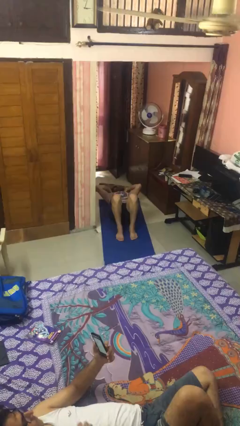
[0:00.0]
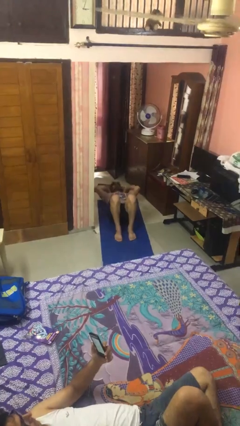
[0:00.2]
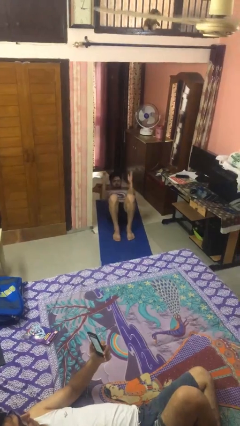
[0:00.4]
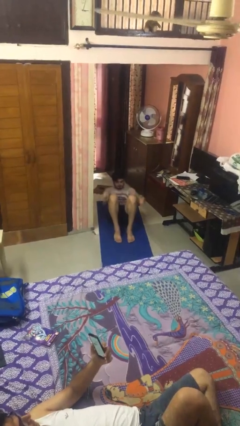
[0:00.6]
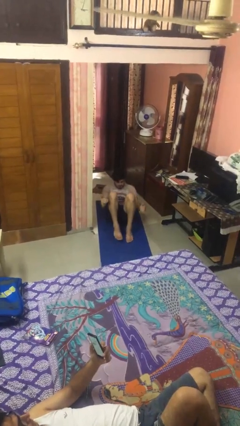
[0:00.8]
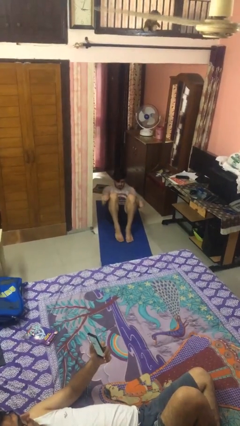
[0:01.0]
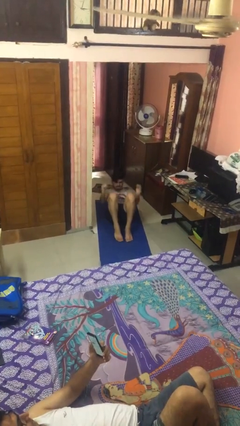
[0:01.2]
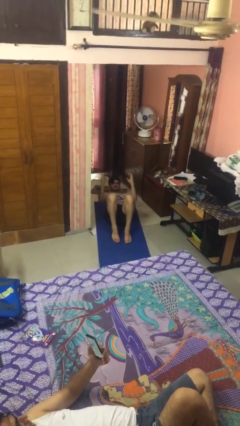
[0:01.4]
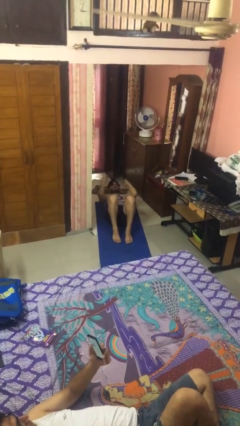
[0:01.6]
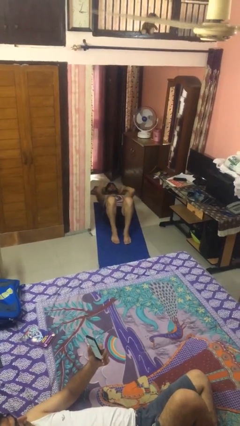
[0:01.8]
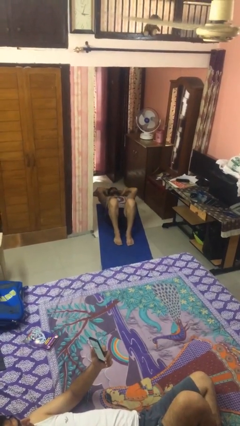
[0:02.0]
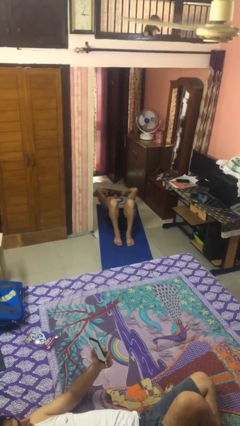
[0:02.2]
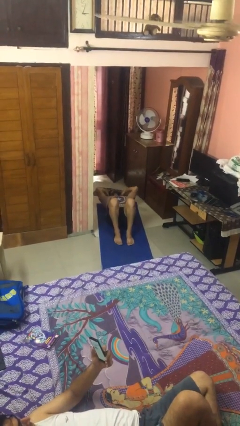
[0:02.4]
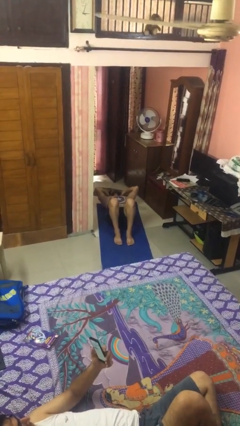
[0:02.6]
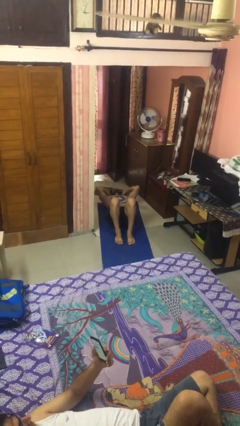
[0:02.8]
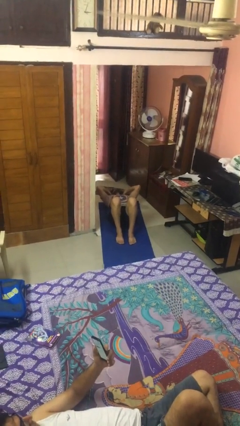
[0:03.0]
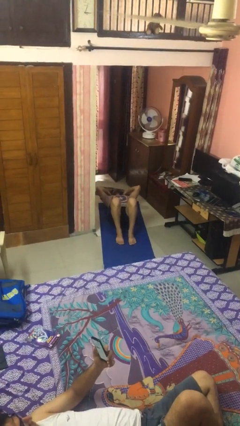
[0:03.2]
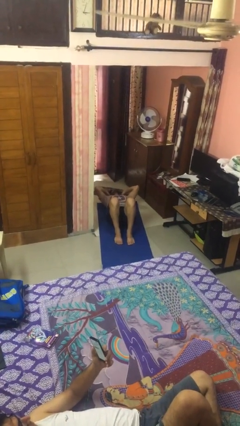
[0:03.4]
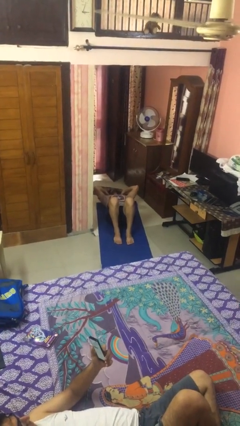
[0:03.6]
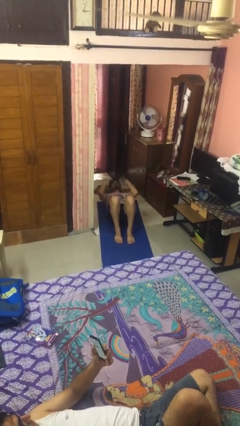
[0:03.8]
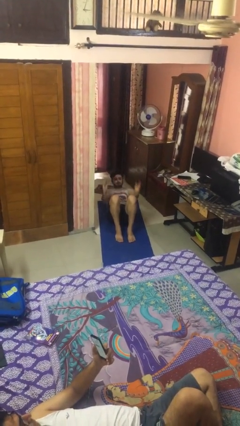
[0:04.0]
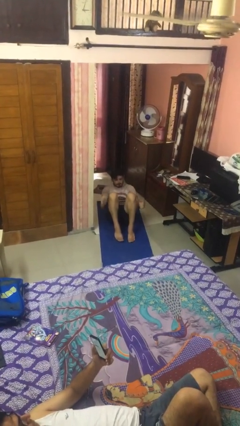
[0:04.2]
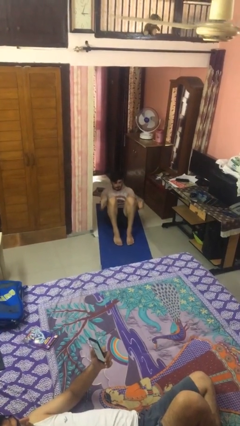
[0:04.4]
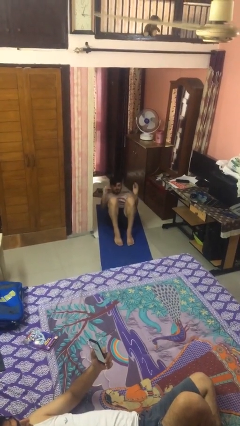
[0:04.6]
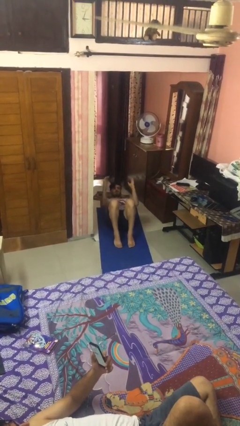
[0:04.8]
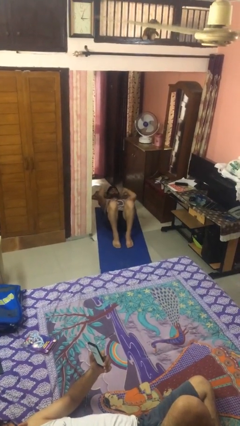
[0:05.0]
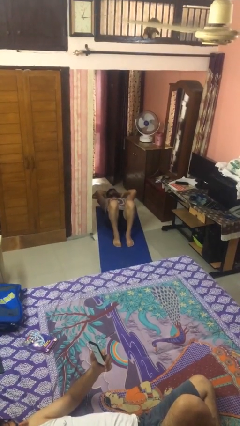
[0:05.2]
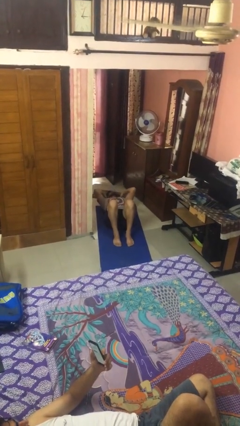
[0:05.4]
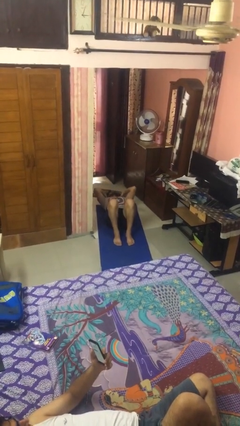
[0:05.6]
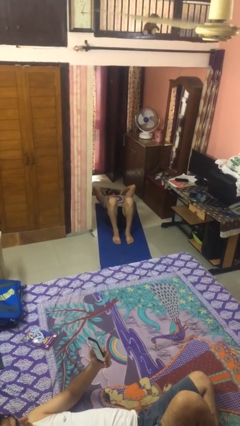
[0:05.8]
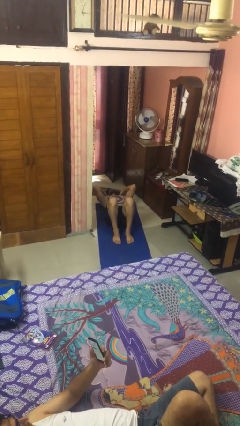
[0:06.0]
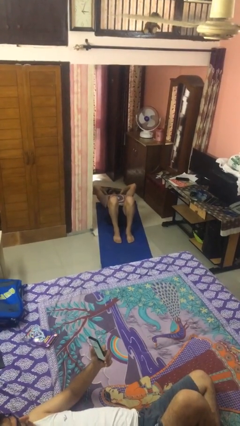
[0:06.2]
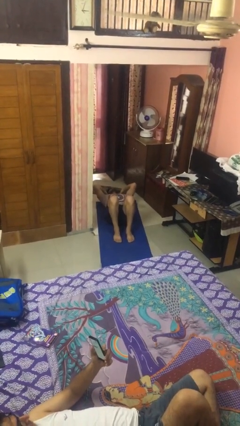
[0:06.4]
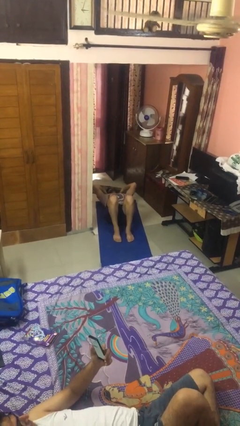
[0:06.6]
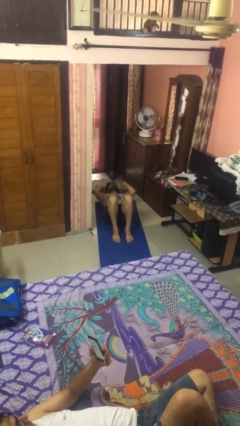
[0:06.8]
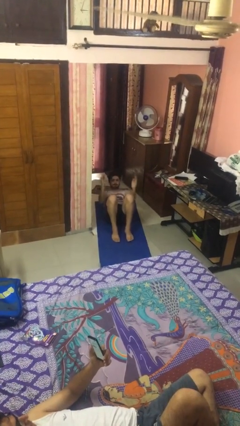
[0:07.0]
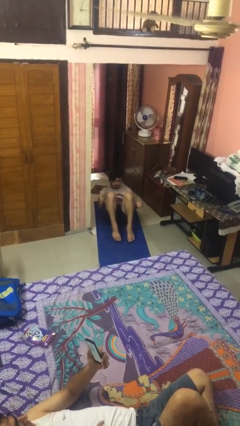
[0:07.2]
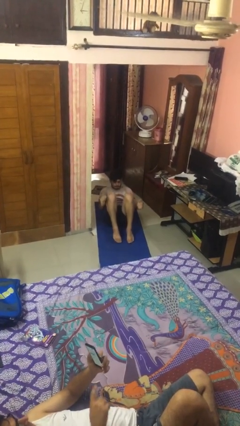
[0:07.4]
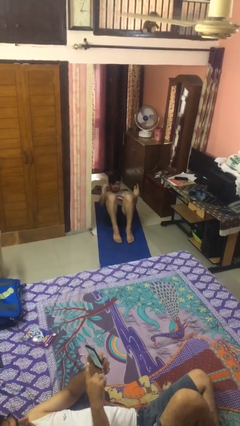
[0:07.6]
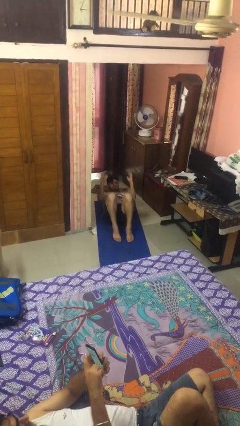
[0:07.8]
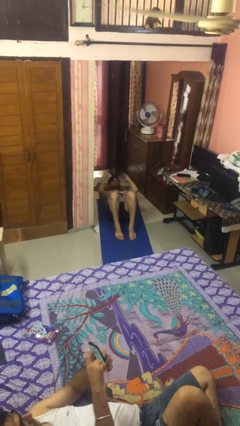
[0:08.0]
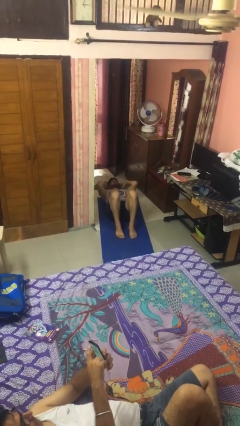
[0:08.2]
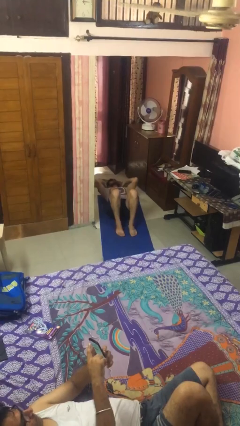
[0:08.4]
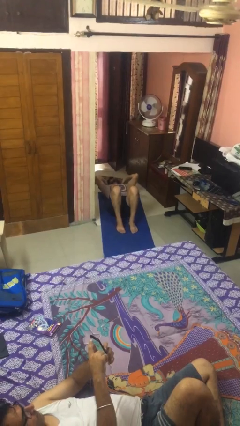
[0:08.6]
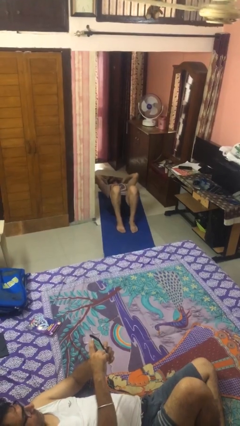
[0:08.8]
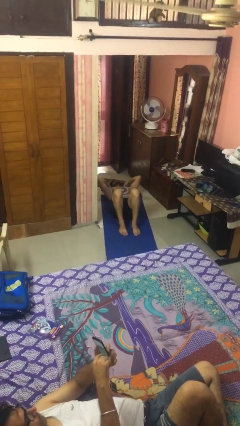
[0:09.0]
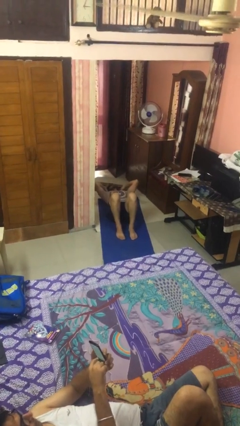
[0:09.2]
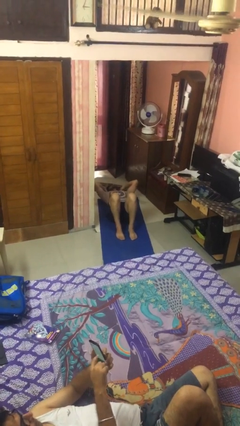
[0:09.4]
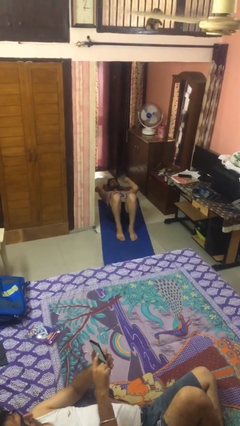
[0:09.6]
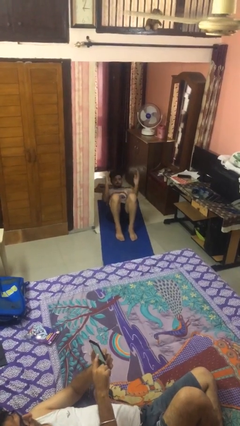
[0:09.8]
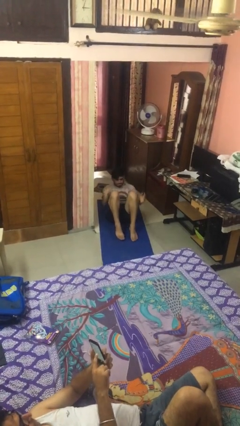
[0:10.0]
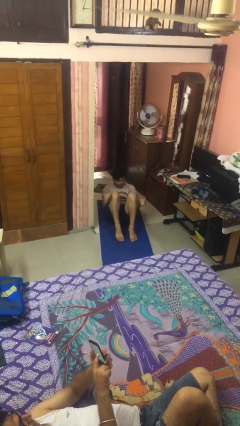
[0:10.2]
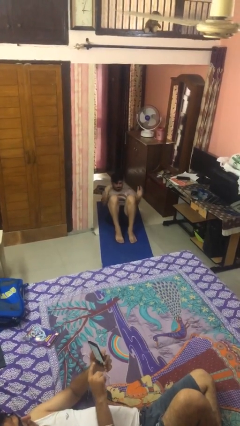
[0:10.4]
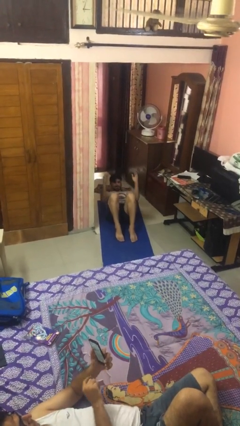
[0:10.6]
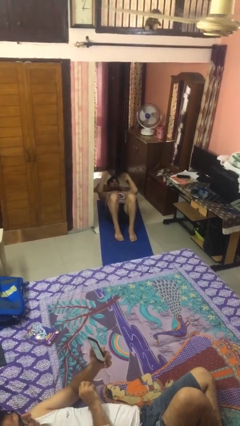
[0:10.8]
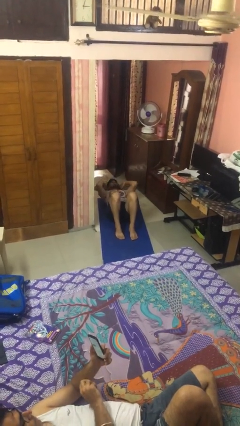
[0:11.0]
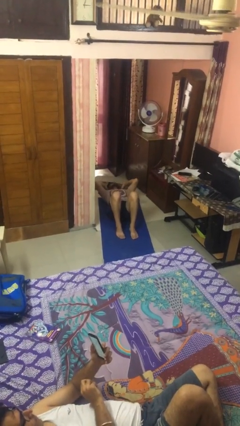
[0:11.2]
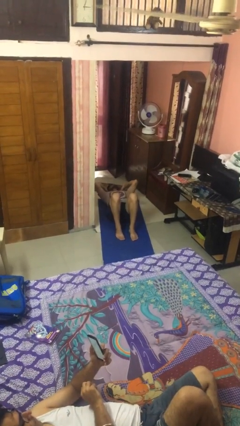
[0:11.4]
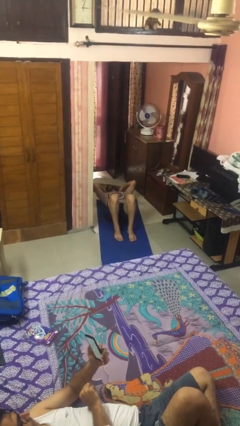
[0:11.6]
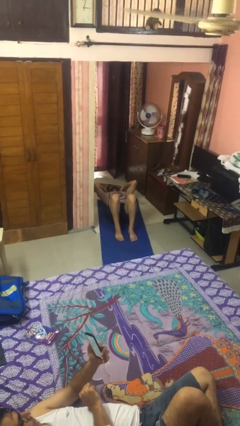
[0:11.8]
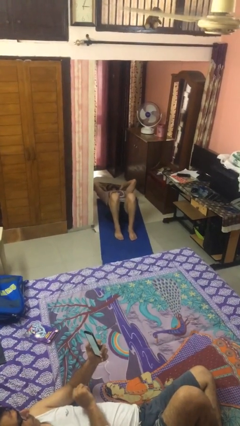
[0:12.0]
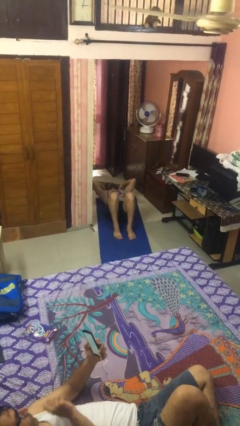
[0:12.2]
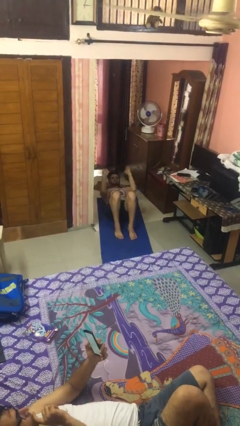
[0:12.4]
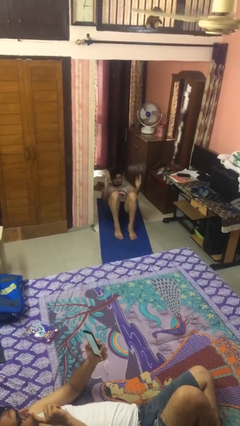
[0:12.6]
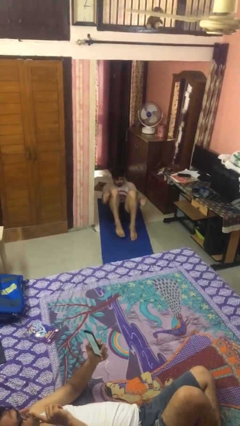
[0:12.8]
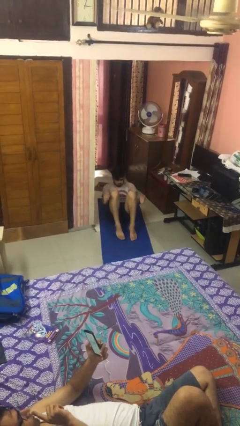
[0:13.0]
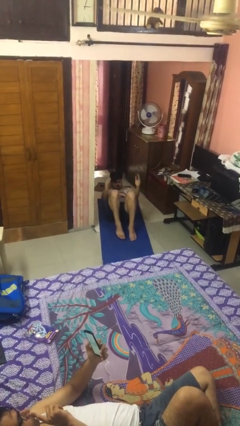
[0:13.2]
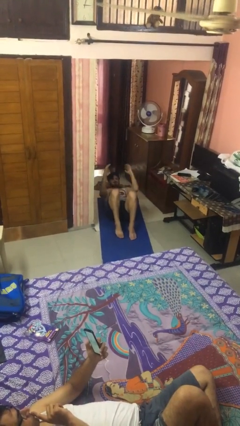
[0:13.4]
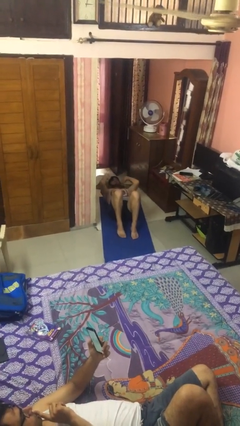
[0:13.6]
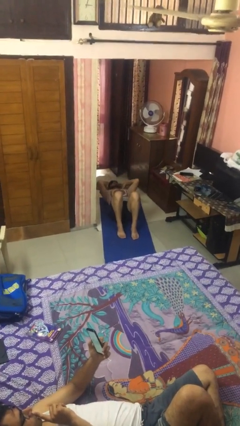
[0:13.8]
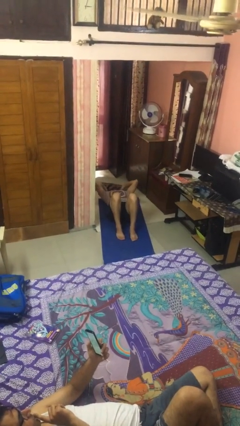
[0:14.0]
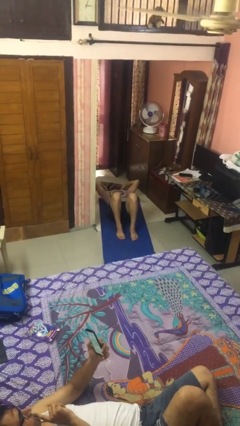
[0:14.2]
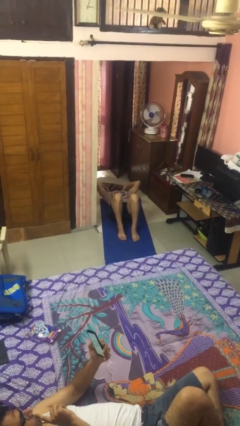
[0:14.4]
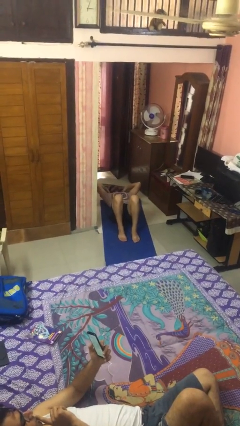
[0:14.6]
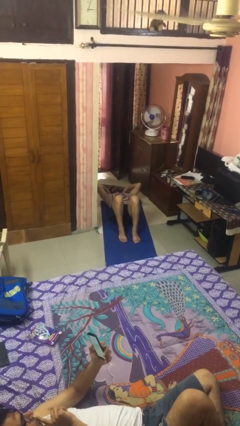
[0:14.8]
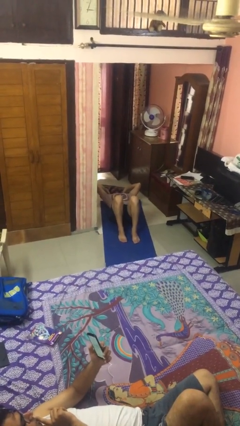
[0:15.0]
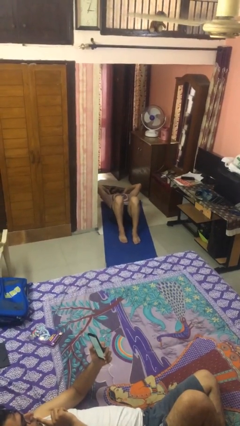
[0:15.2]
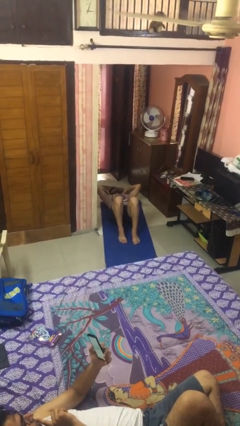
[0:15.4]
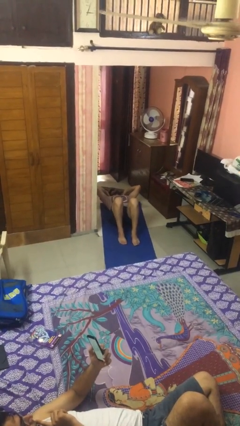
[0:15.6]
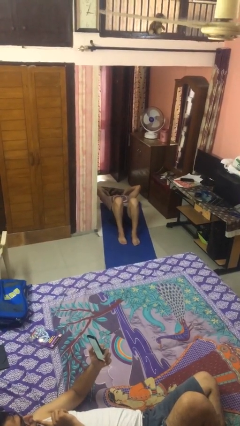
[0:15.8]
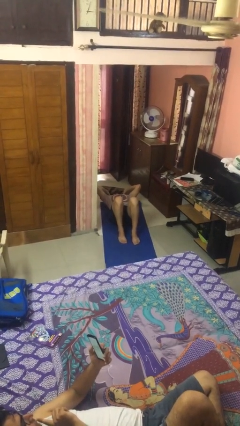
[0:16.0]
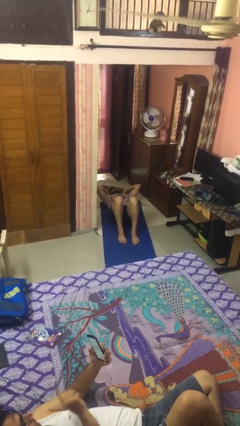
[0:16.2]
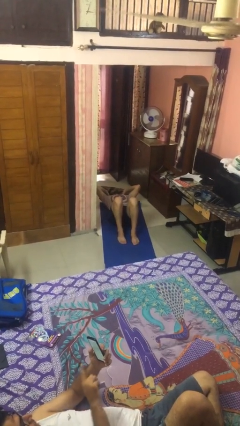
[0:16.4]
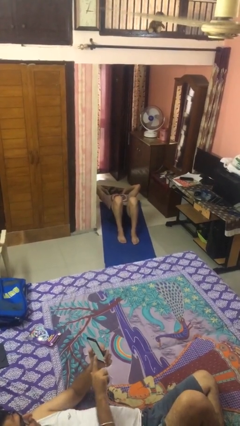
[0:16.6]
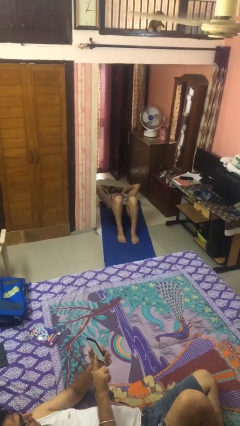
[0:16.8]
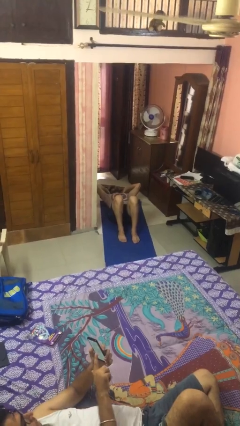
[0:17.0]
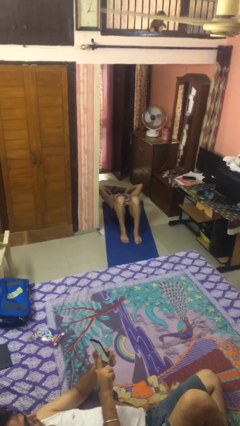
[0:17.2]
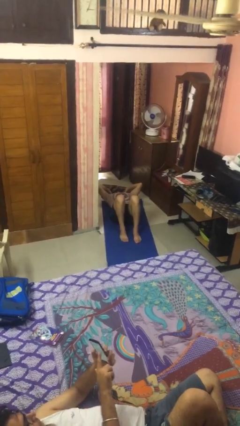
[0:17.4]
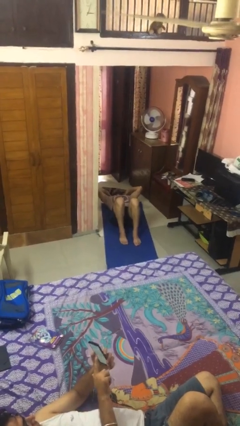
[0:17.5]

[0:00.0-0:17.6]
person exercises with situp

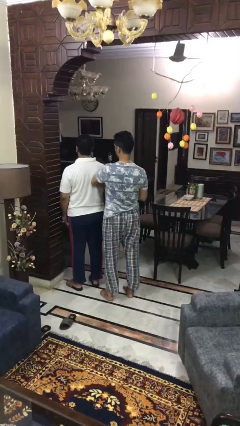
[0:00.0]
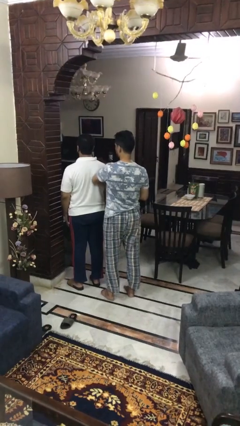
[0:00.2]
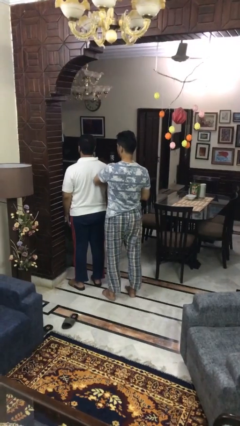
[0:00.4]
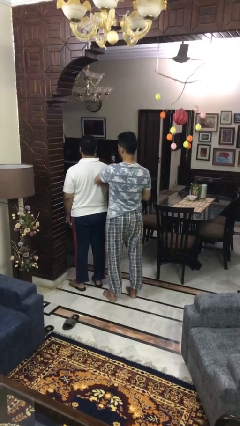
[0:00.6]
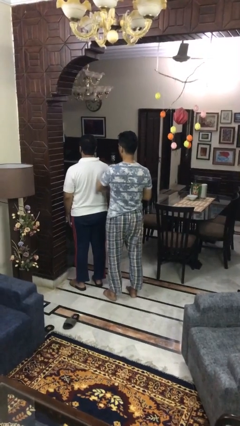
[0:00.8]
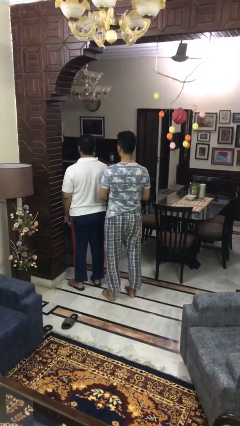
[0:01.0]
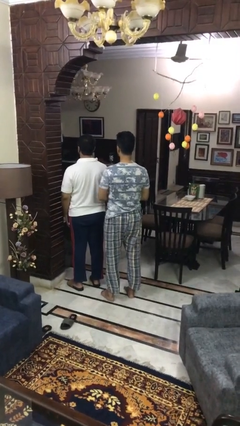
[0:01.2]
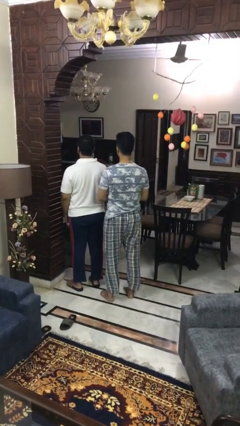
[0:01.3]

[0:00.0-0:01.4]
person nudges person with elbow
